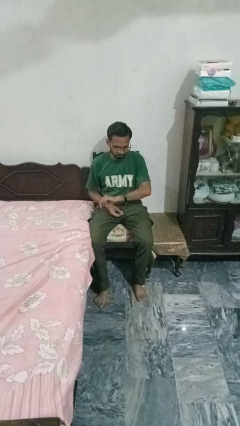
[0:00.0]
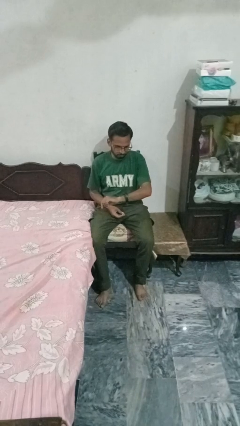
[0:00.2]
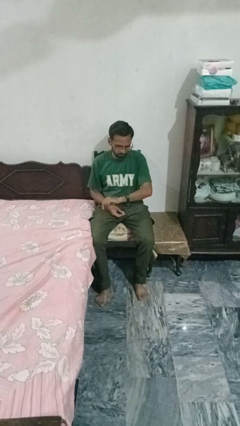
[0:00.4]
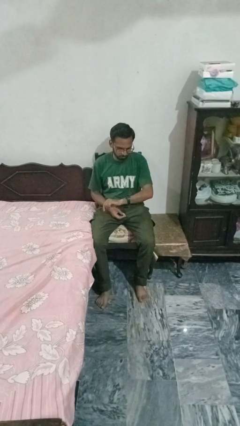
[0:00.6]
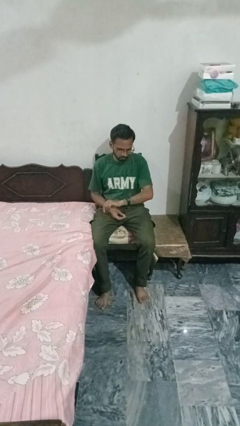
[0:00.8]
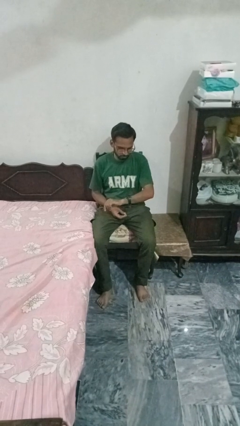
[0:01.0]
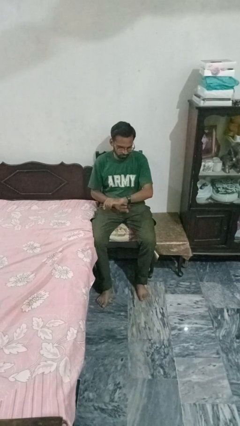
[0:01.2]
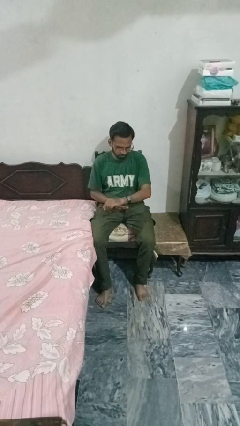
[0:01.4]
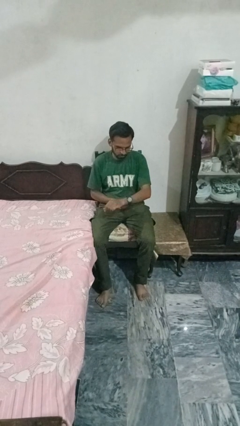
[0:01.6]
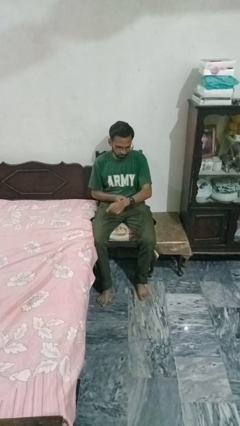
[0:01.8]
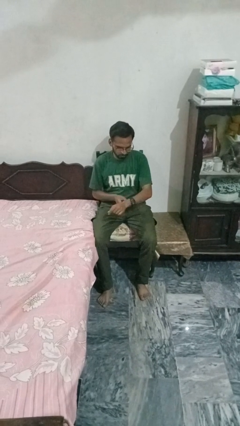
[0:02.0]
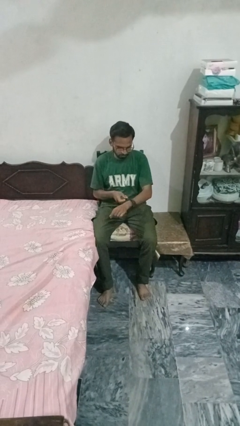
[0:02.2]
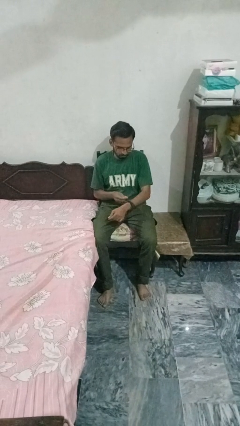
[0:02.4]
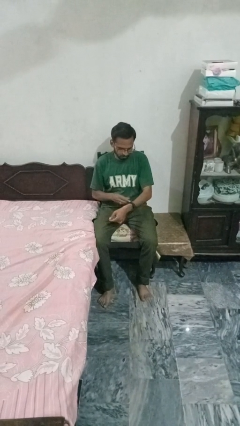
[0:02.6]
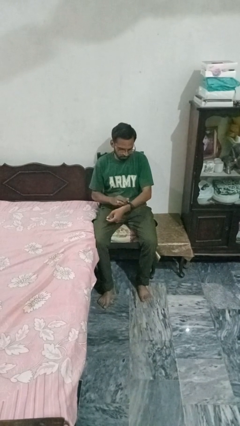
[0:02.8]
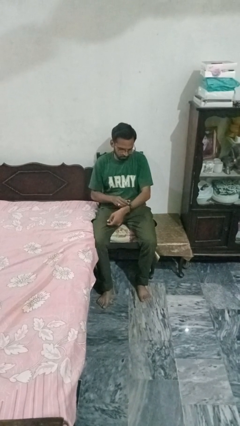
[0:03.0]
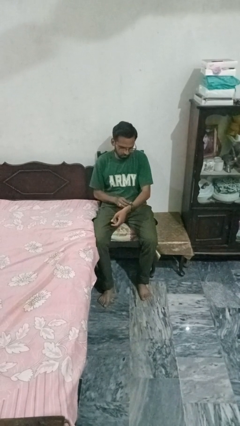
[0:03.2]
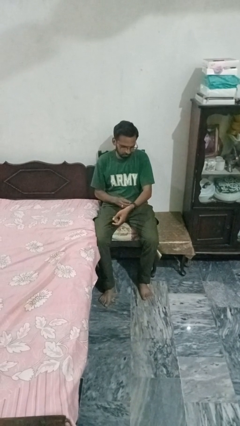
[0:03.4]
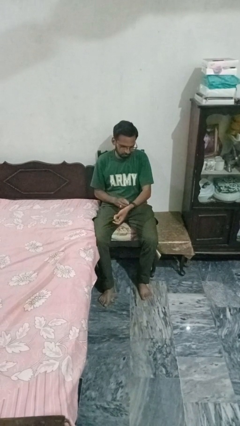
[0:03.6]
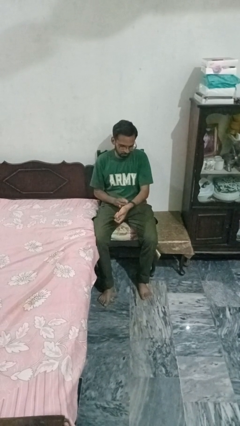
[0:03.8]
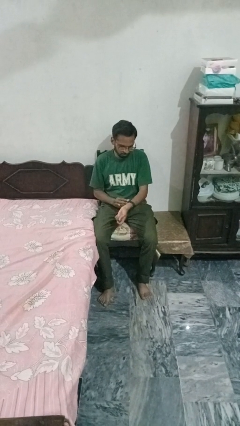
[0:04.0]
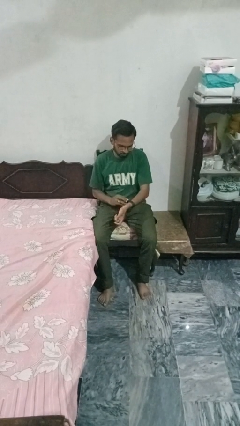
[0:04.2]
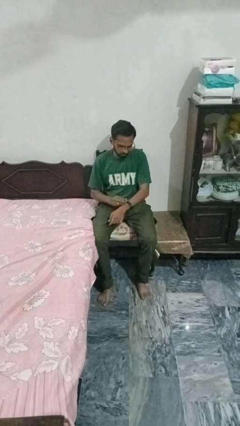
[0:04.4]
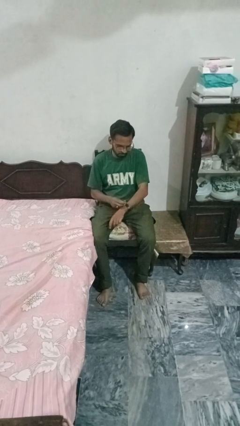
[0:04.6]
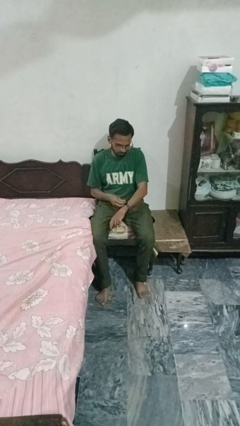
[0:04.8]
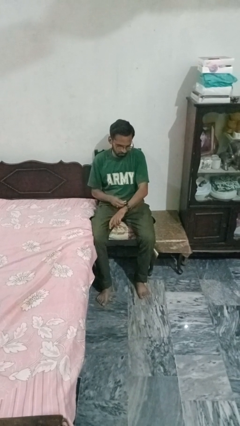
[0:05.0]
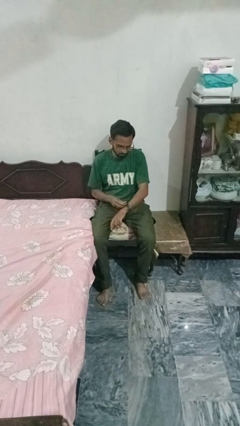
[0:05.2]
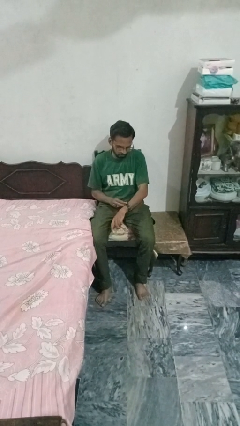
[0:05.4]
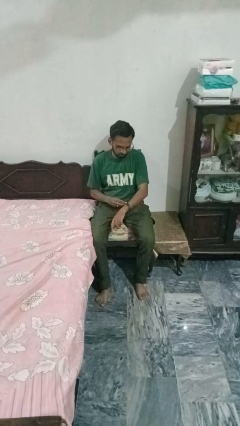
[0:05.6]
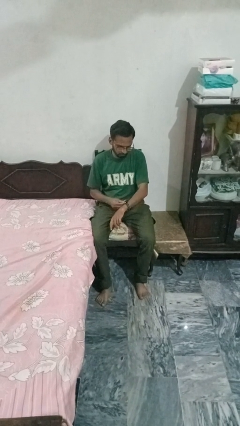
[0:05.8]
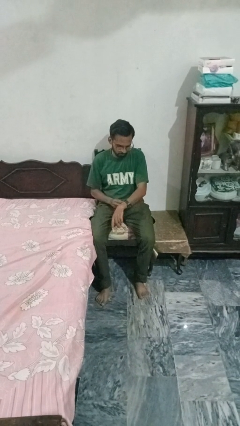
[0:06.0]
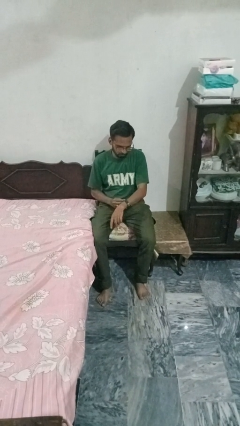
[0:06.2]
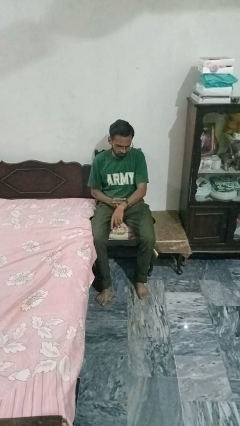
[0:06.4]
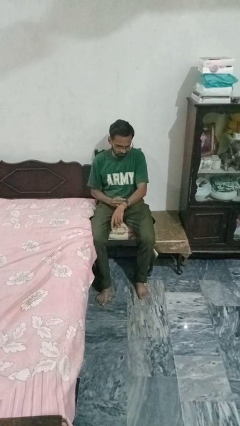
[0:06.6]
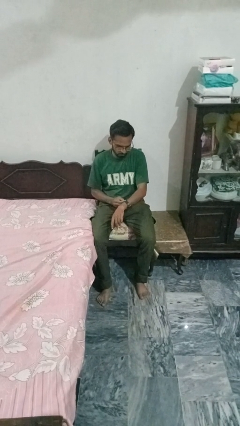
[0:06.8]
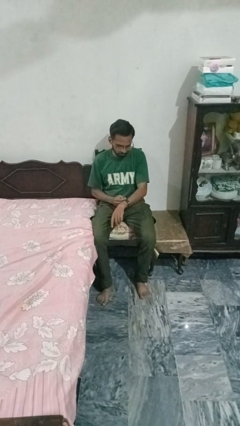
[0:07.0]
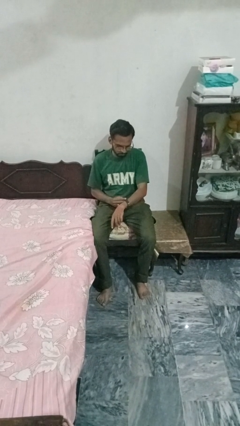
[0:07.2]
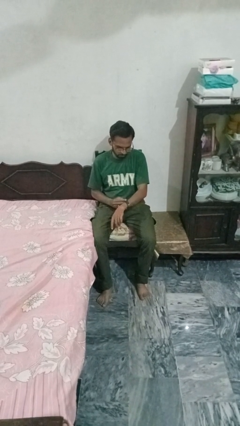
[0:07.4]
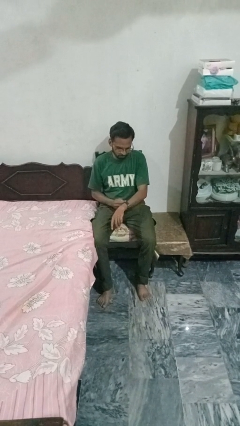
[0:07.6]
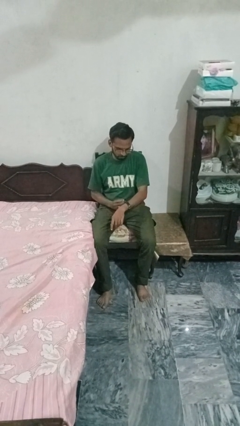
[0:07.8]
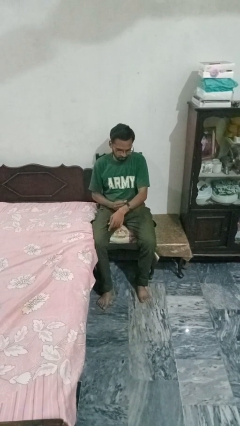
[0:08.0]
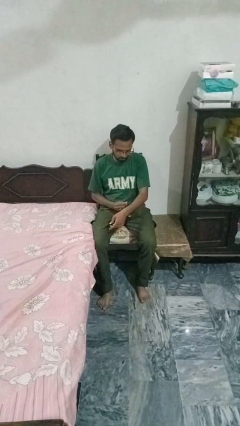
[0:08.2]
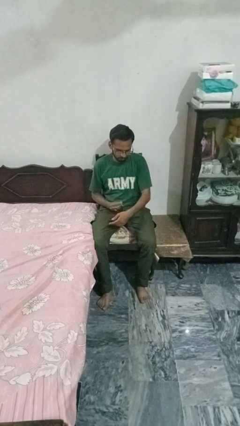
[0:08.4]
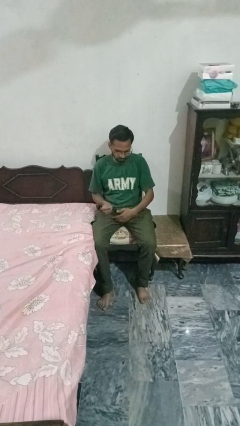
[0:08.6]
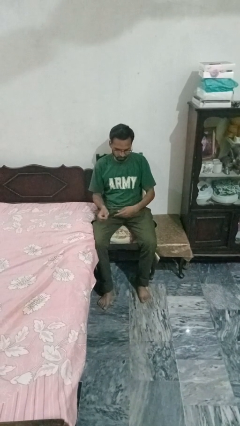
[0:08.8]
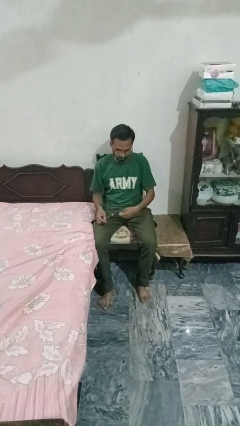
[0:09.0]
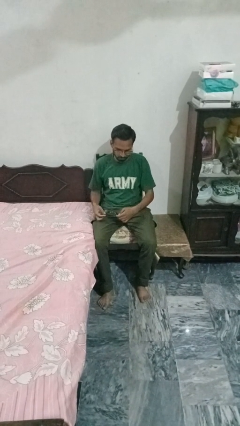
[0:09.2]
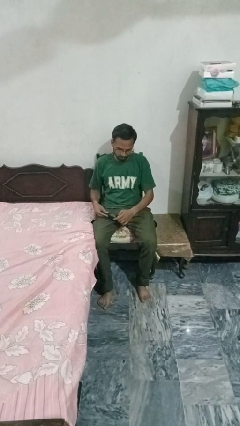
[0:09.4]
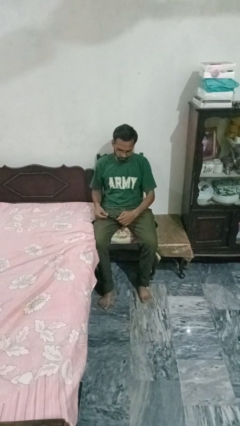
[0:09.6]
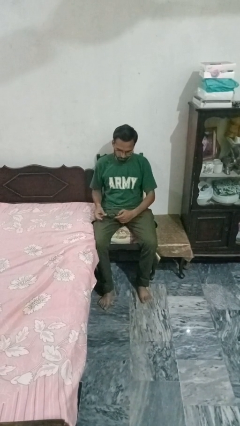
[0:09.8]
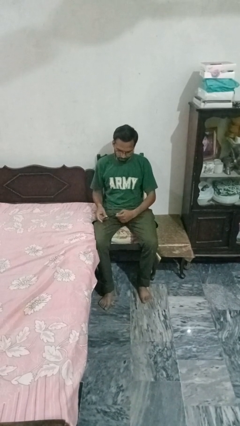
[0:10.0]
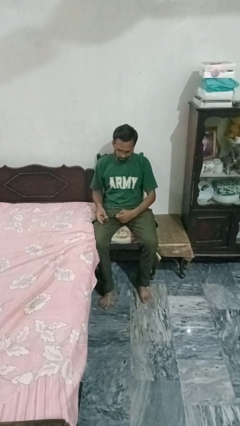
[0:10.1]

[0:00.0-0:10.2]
person takes off wristwatch

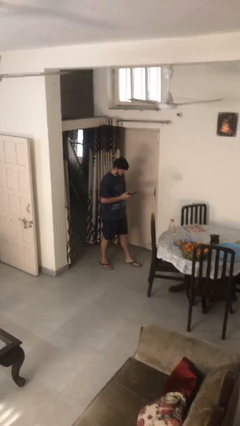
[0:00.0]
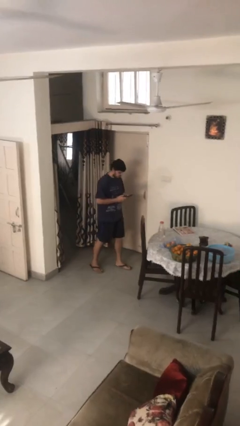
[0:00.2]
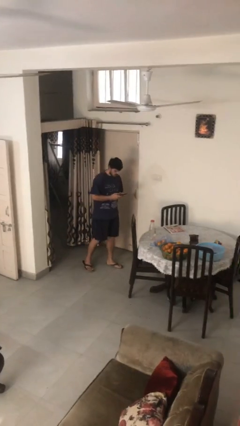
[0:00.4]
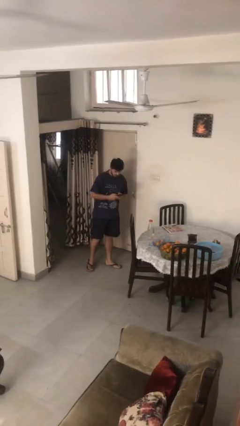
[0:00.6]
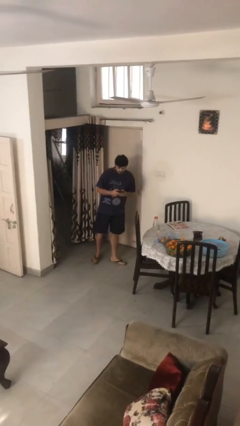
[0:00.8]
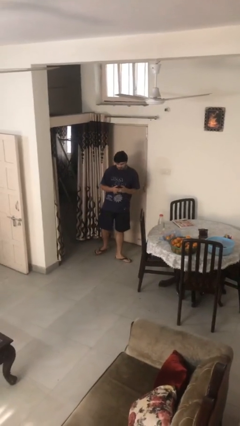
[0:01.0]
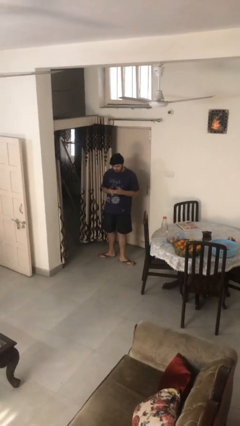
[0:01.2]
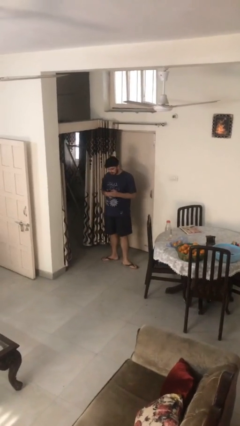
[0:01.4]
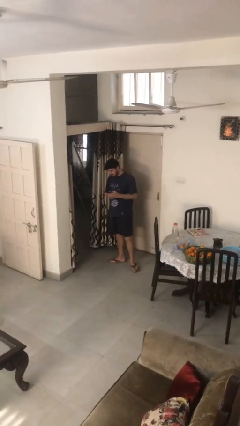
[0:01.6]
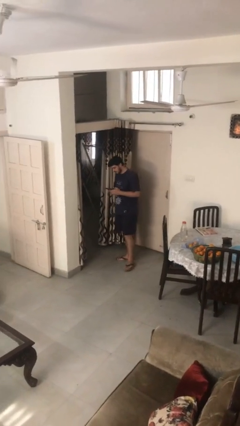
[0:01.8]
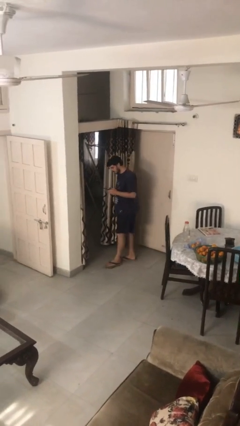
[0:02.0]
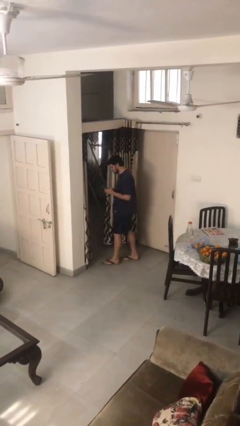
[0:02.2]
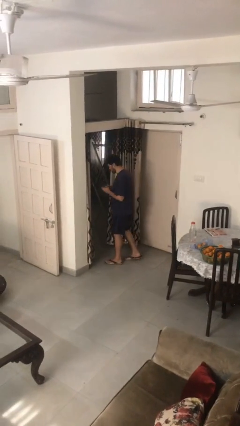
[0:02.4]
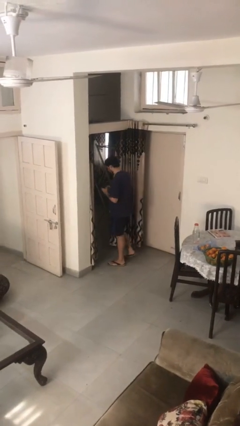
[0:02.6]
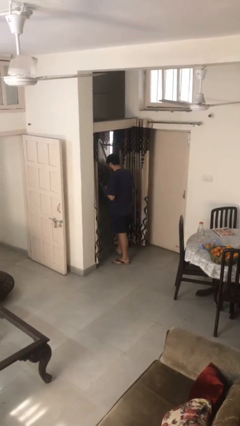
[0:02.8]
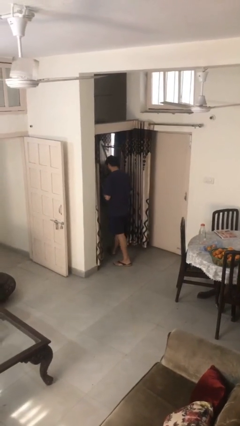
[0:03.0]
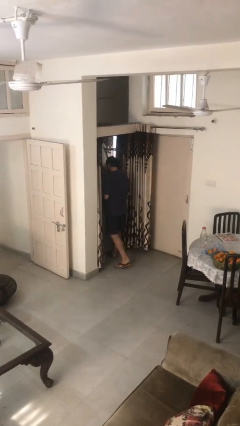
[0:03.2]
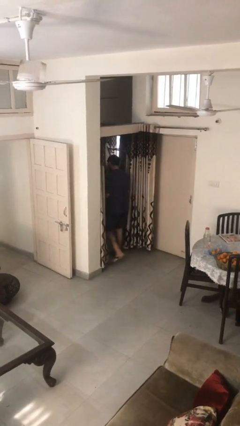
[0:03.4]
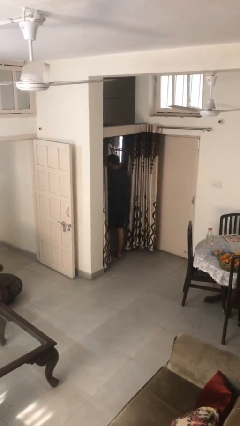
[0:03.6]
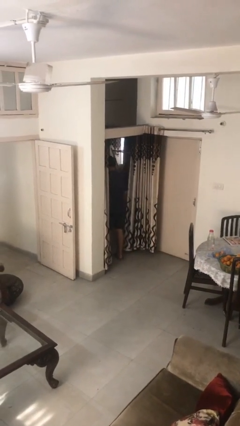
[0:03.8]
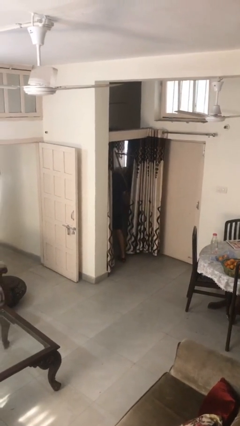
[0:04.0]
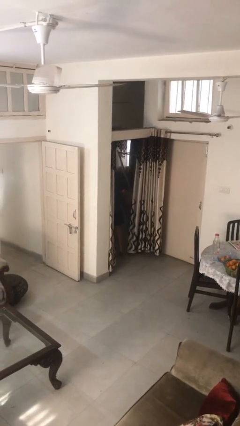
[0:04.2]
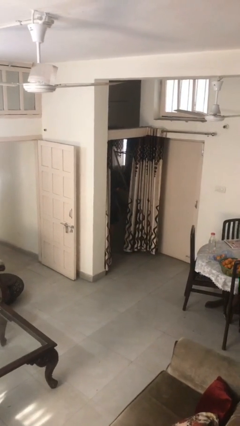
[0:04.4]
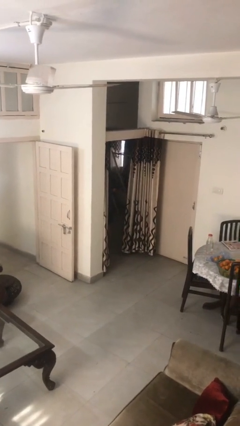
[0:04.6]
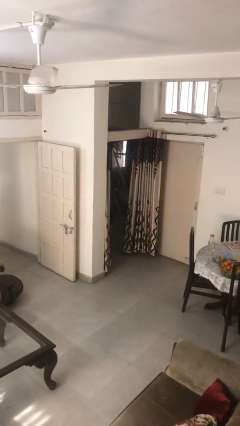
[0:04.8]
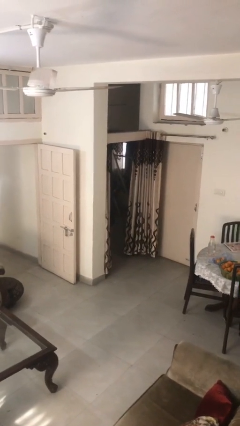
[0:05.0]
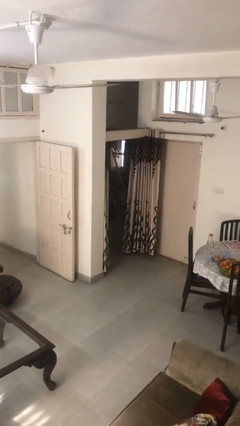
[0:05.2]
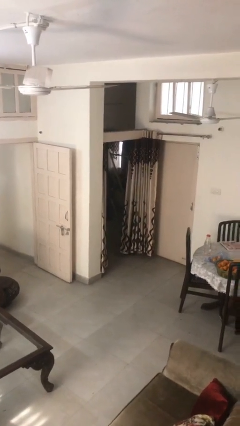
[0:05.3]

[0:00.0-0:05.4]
person exits scene through structure

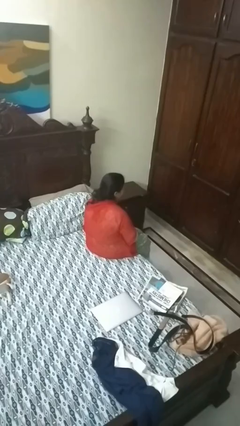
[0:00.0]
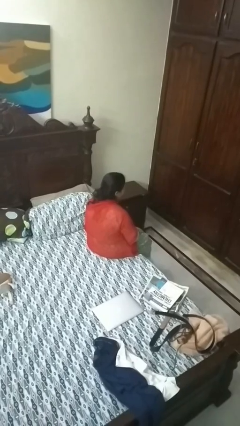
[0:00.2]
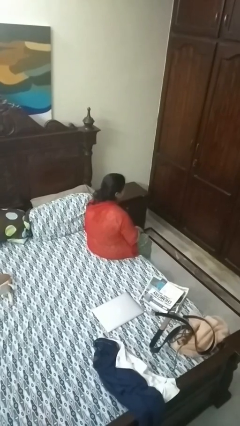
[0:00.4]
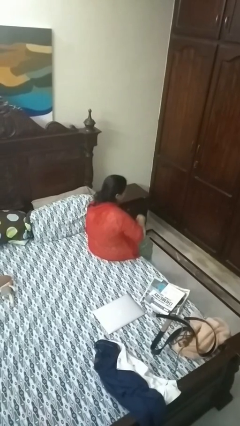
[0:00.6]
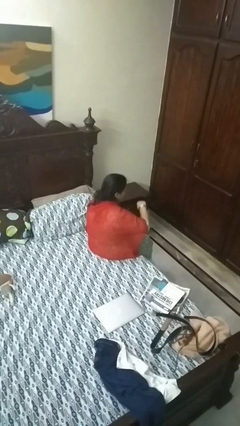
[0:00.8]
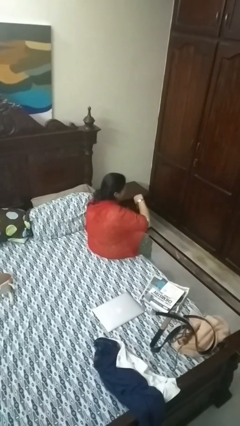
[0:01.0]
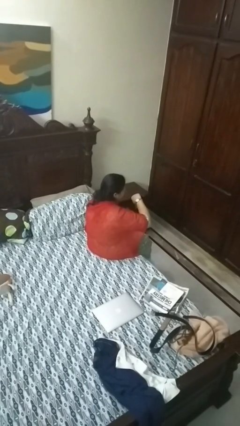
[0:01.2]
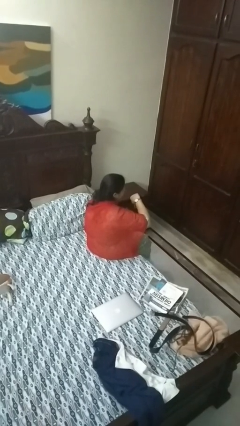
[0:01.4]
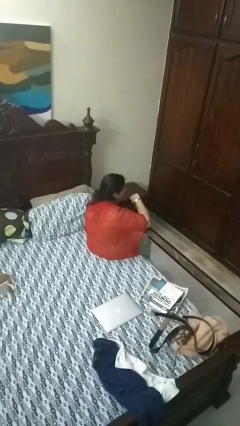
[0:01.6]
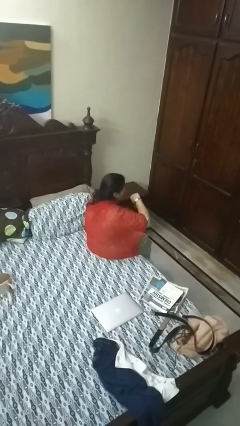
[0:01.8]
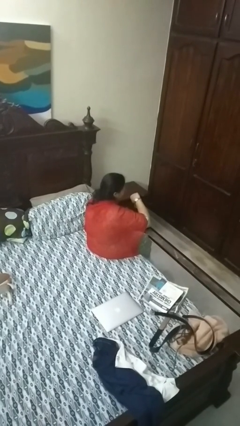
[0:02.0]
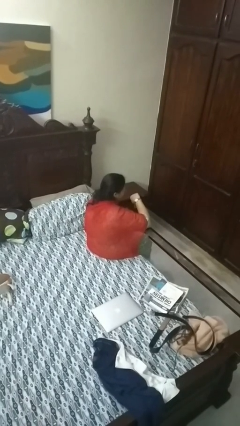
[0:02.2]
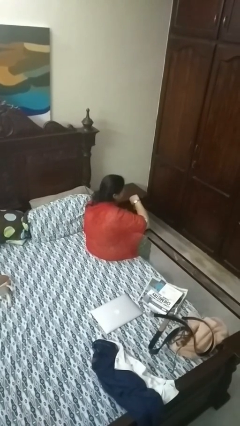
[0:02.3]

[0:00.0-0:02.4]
person looks at wristwatch
